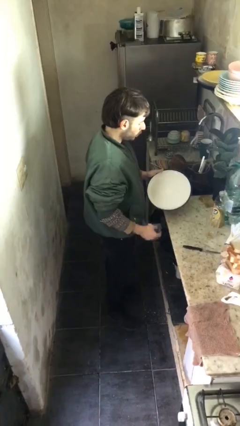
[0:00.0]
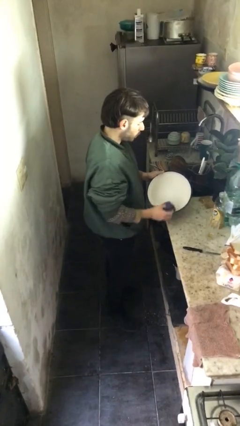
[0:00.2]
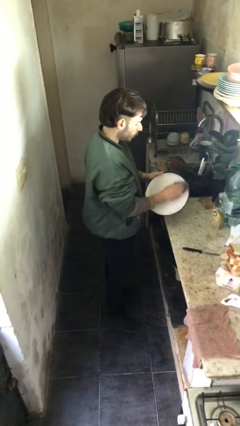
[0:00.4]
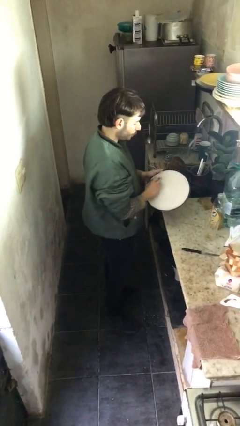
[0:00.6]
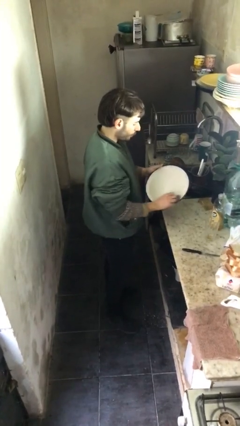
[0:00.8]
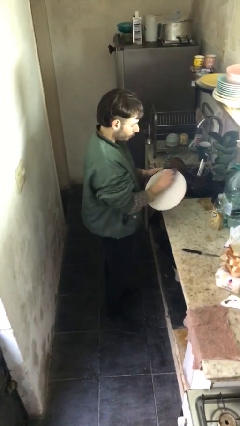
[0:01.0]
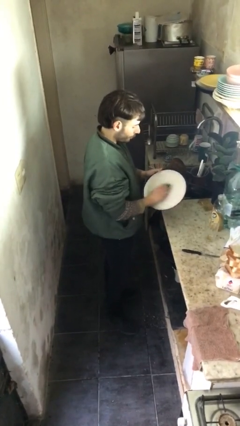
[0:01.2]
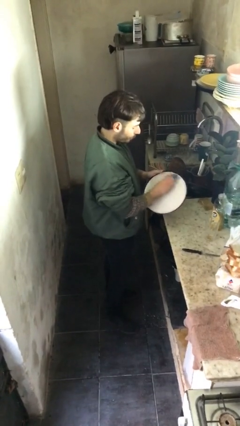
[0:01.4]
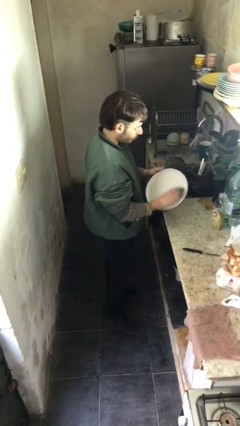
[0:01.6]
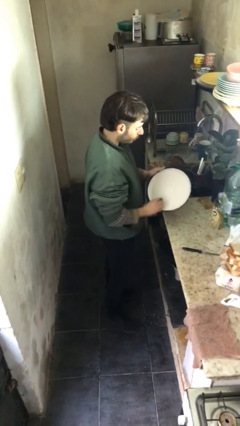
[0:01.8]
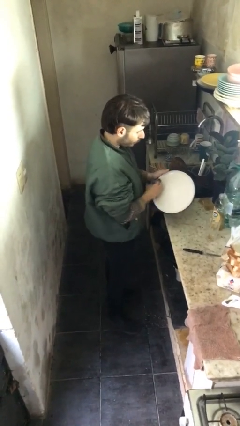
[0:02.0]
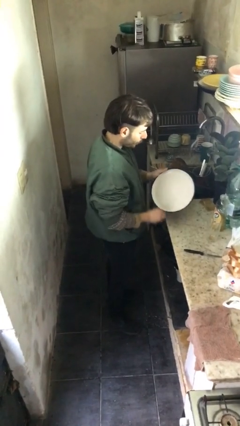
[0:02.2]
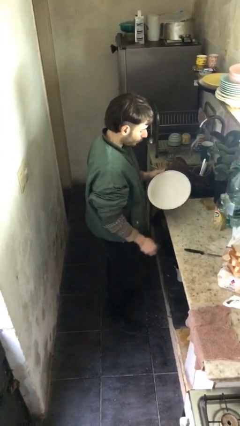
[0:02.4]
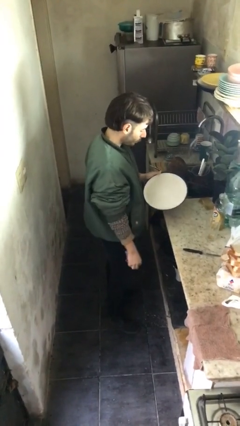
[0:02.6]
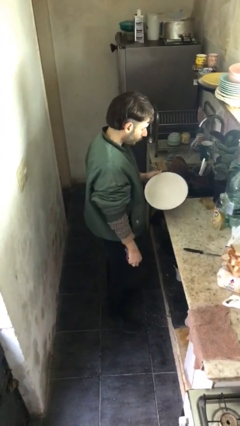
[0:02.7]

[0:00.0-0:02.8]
person dries dish

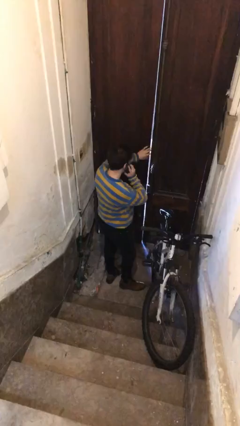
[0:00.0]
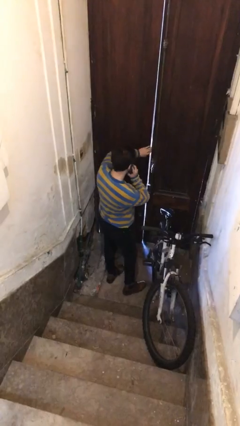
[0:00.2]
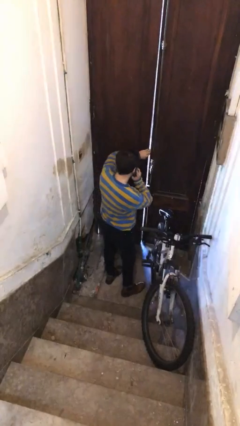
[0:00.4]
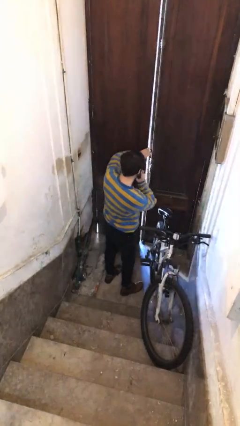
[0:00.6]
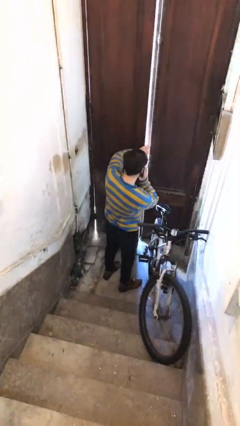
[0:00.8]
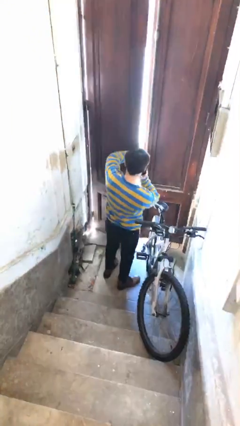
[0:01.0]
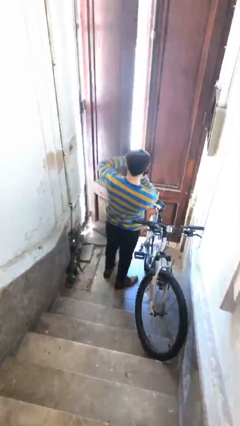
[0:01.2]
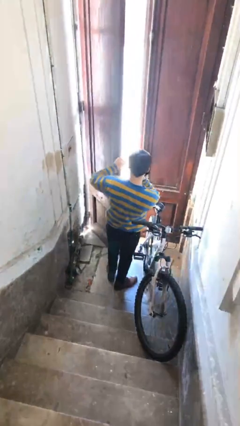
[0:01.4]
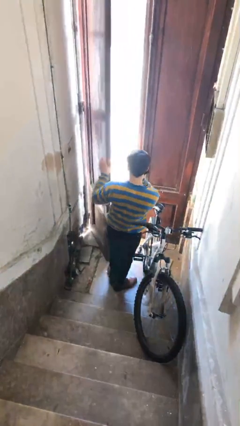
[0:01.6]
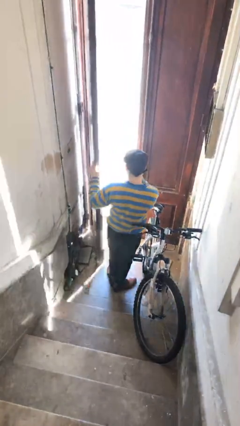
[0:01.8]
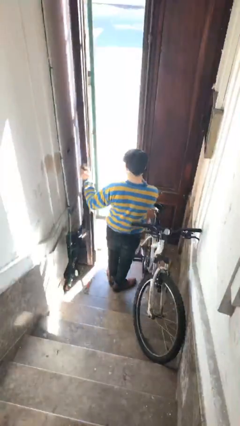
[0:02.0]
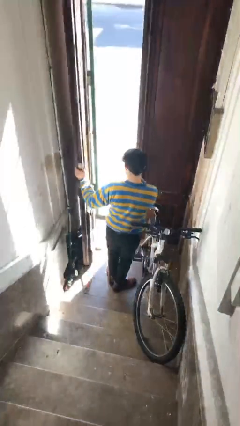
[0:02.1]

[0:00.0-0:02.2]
person opens facility door

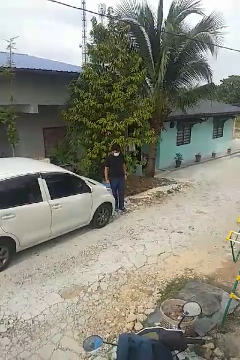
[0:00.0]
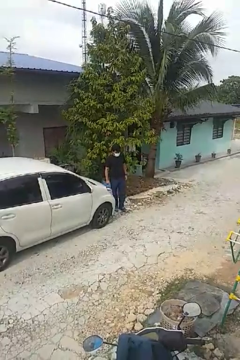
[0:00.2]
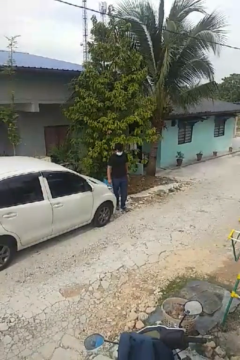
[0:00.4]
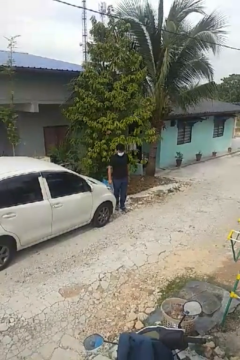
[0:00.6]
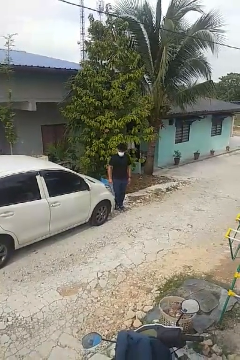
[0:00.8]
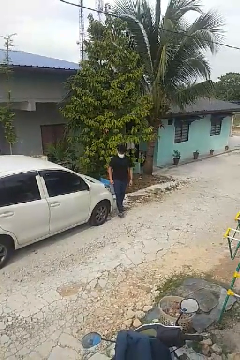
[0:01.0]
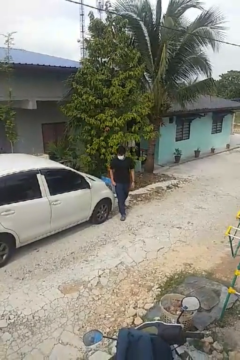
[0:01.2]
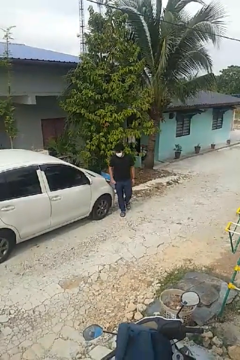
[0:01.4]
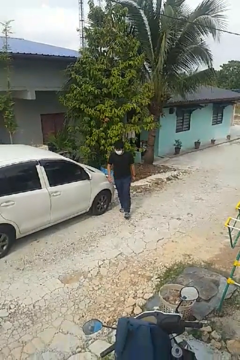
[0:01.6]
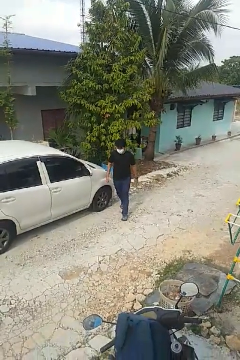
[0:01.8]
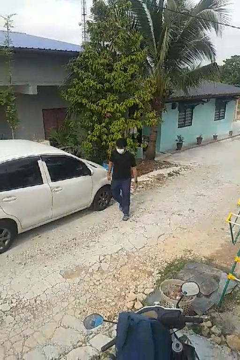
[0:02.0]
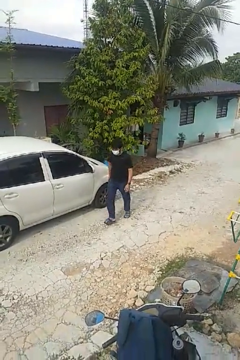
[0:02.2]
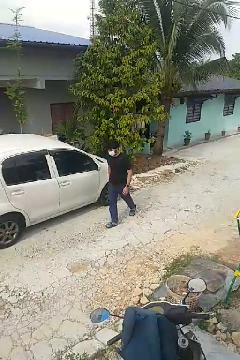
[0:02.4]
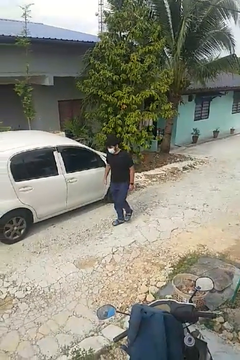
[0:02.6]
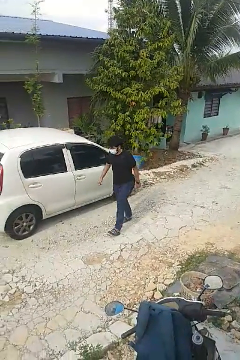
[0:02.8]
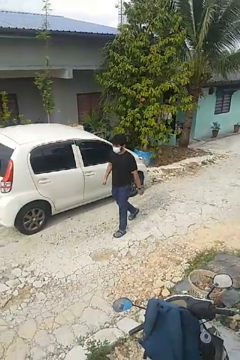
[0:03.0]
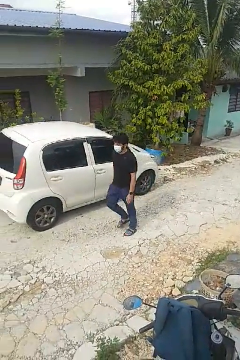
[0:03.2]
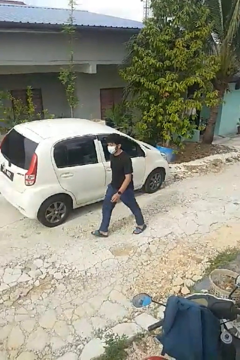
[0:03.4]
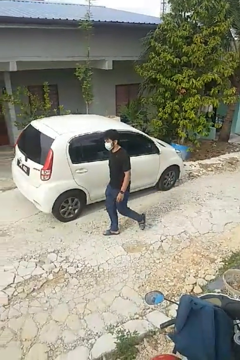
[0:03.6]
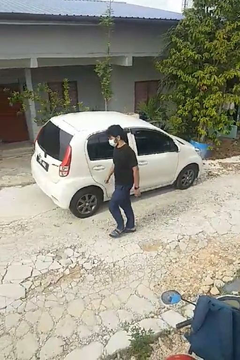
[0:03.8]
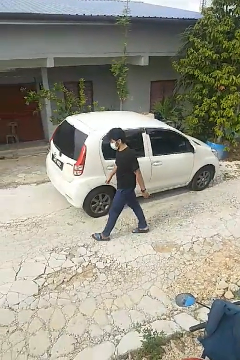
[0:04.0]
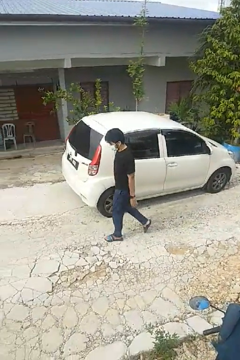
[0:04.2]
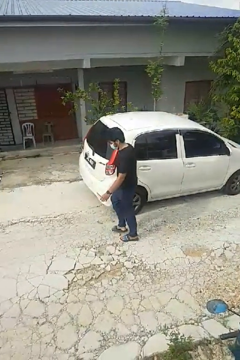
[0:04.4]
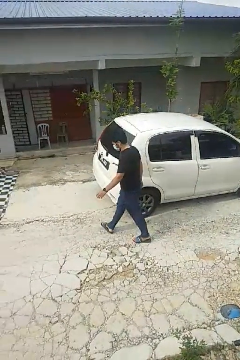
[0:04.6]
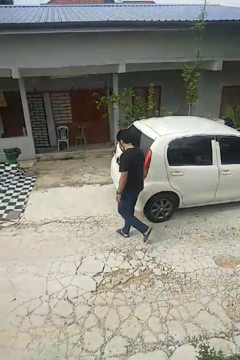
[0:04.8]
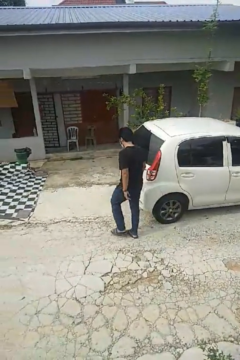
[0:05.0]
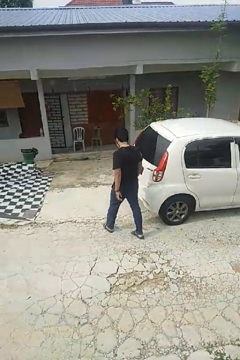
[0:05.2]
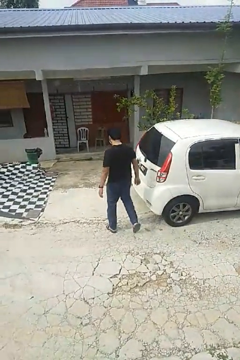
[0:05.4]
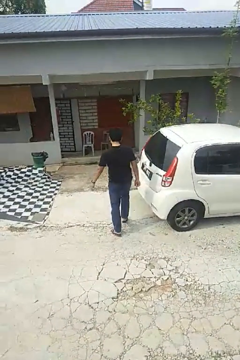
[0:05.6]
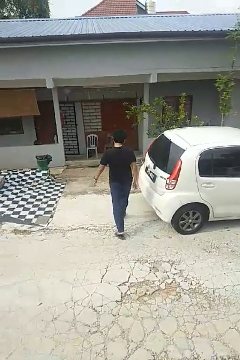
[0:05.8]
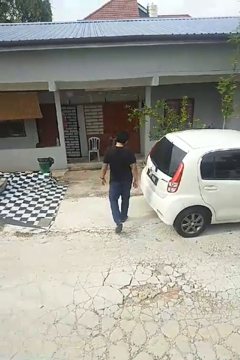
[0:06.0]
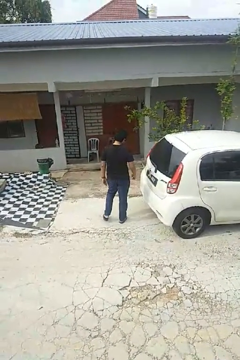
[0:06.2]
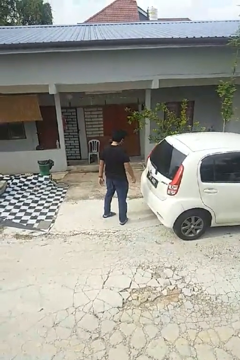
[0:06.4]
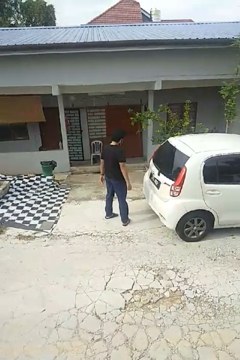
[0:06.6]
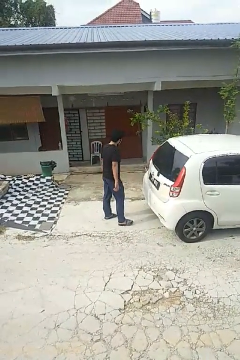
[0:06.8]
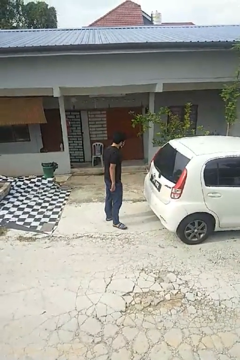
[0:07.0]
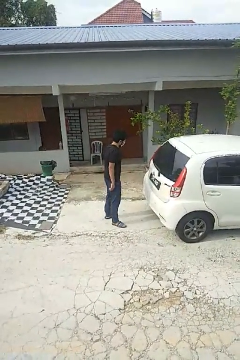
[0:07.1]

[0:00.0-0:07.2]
person walks around car

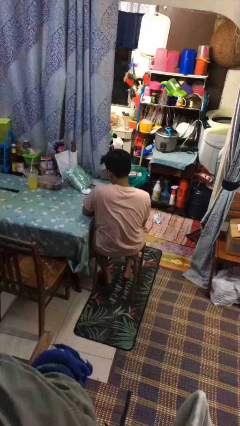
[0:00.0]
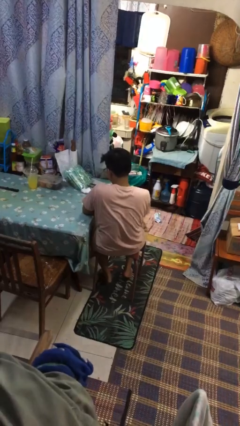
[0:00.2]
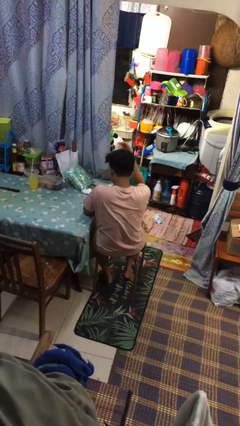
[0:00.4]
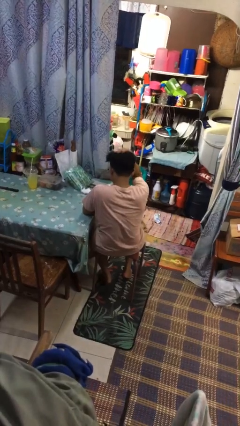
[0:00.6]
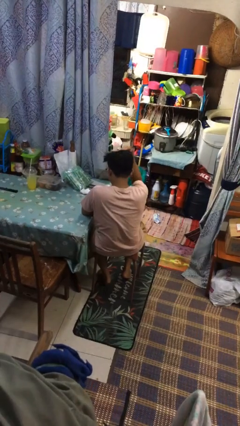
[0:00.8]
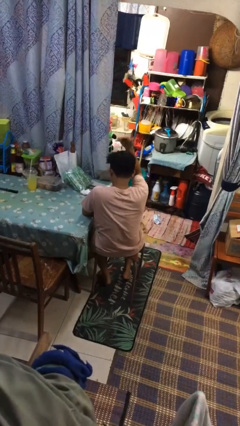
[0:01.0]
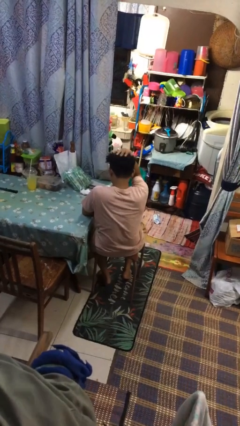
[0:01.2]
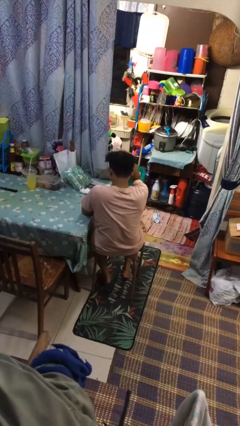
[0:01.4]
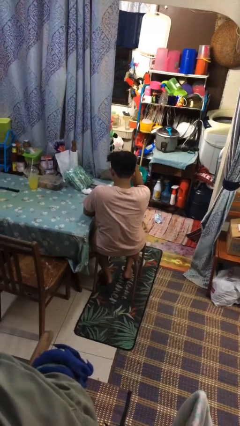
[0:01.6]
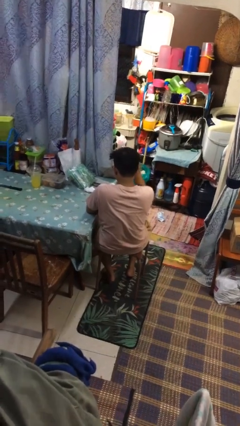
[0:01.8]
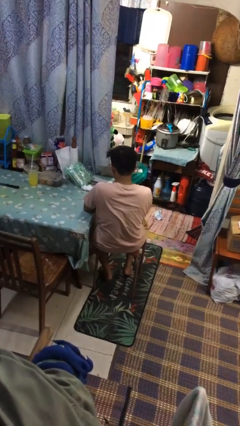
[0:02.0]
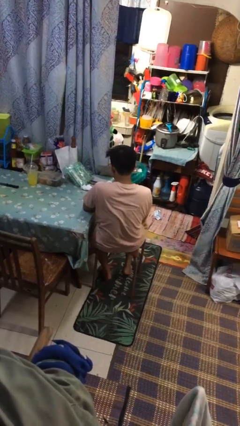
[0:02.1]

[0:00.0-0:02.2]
person pats head

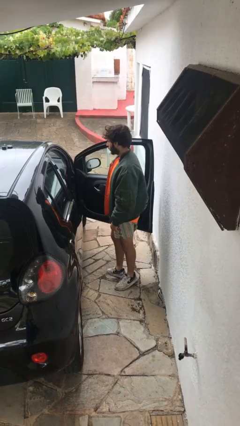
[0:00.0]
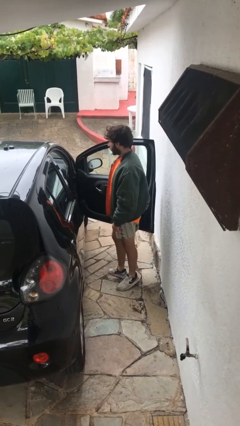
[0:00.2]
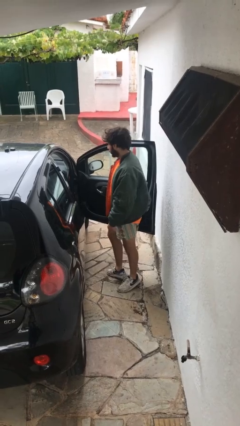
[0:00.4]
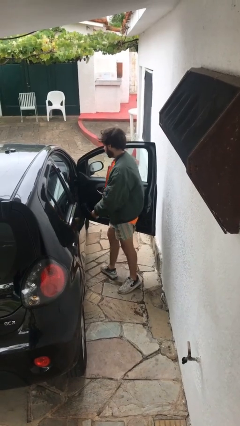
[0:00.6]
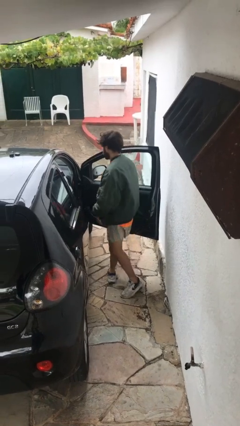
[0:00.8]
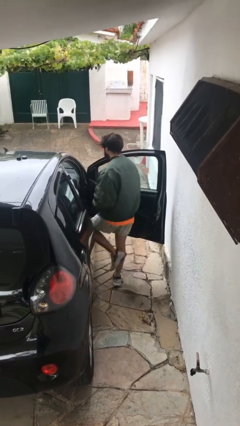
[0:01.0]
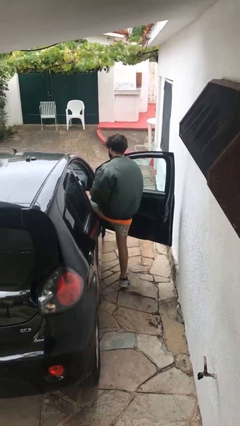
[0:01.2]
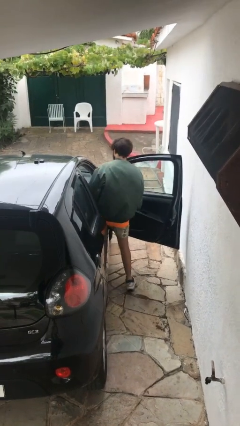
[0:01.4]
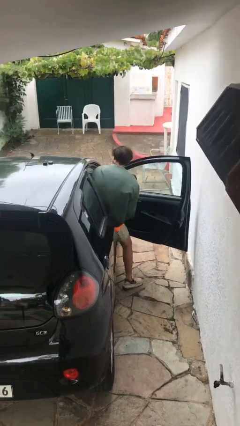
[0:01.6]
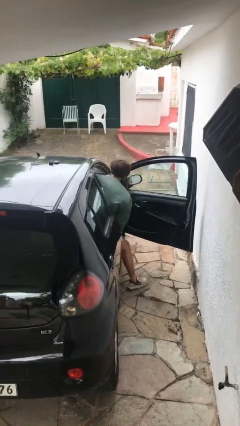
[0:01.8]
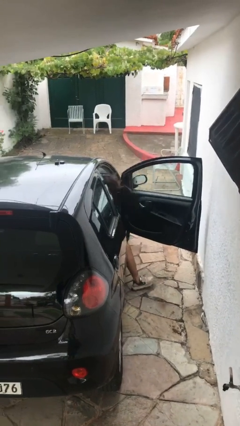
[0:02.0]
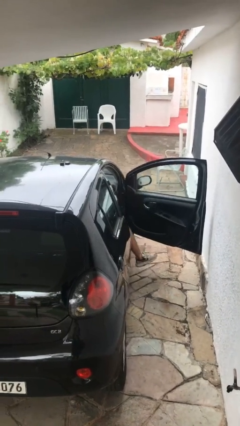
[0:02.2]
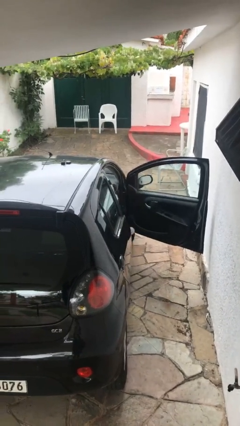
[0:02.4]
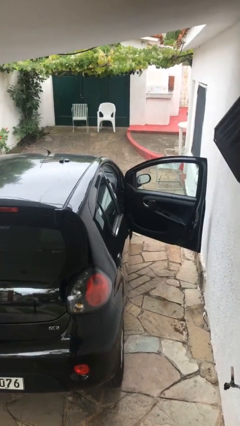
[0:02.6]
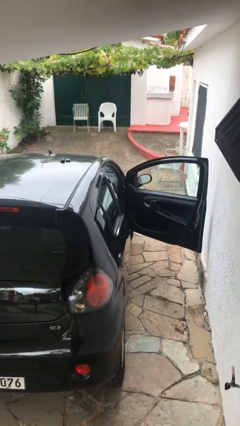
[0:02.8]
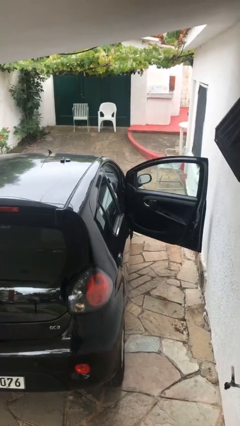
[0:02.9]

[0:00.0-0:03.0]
person enters car

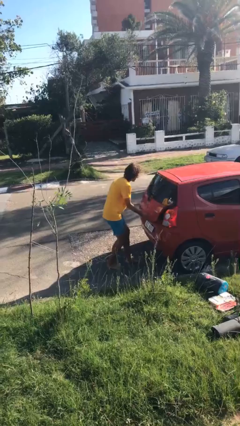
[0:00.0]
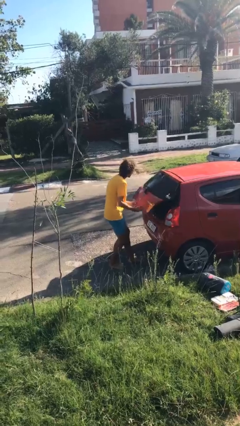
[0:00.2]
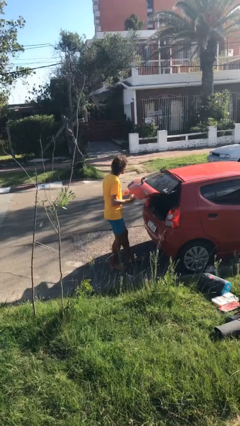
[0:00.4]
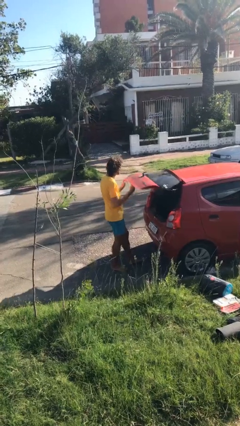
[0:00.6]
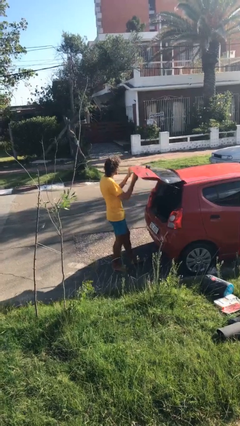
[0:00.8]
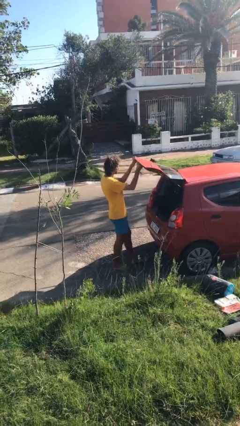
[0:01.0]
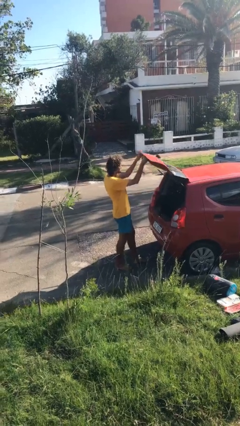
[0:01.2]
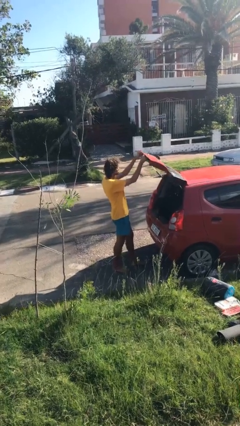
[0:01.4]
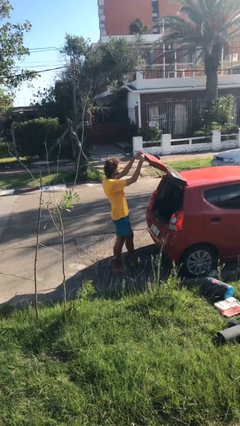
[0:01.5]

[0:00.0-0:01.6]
person opens car trunk
